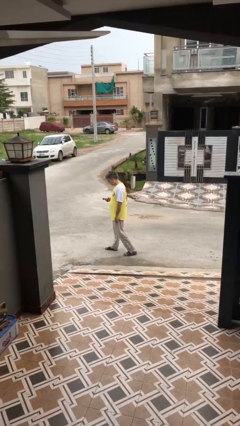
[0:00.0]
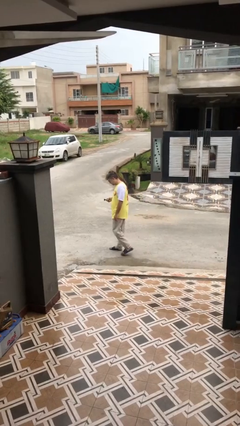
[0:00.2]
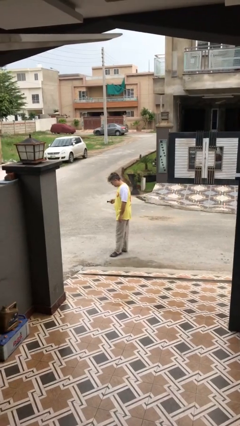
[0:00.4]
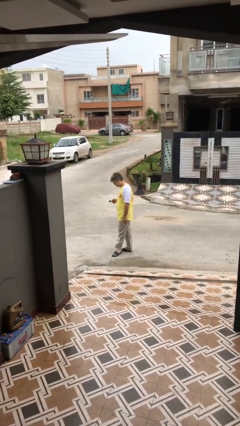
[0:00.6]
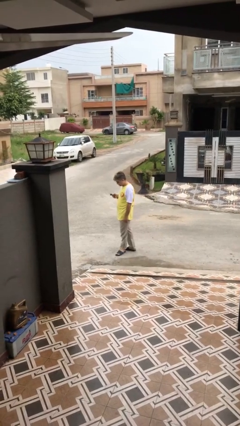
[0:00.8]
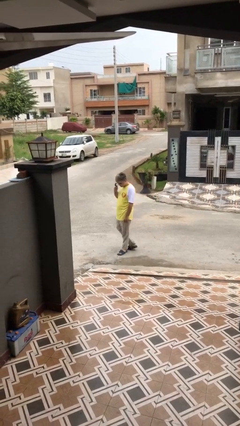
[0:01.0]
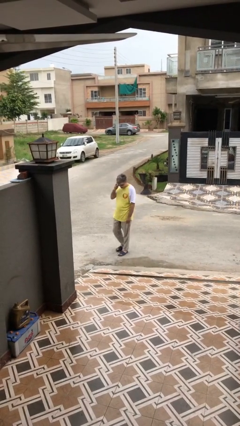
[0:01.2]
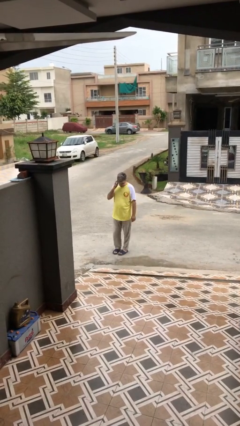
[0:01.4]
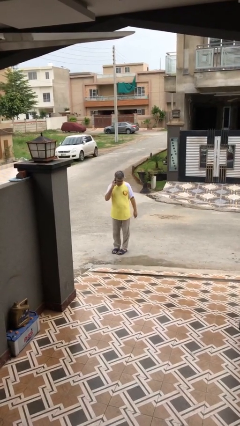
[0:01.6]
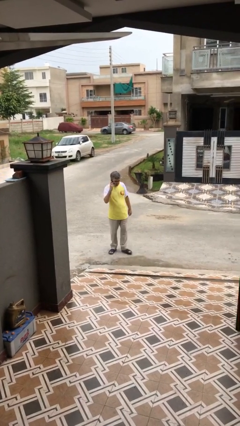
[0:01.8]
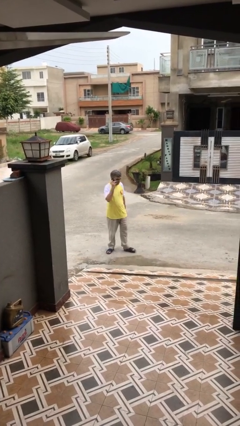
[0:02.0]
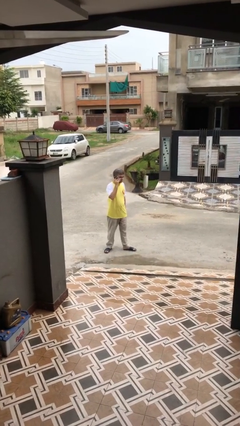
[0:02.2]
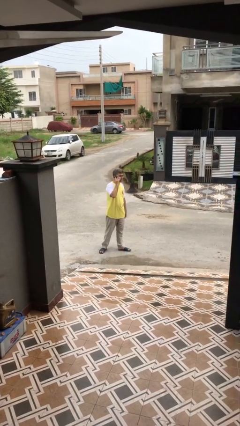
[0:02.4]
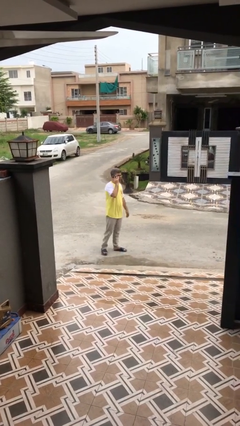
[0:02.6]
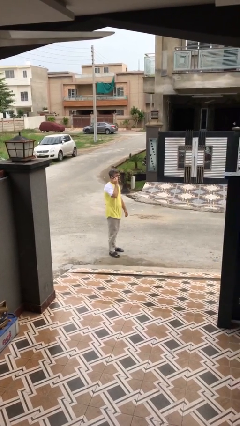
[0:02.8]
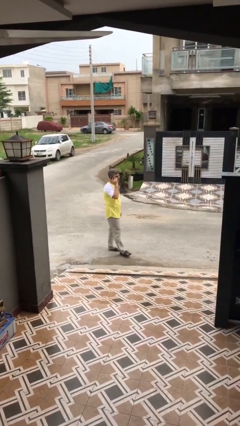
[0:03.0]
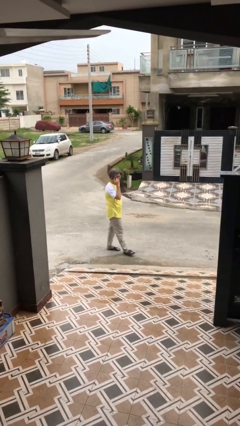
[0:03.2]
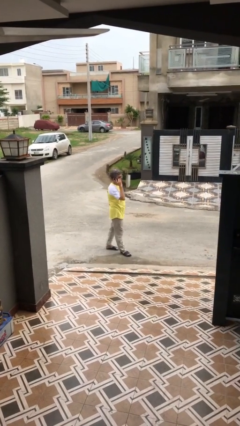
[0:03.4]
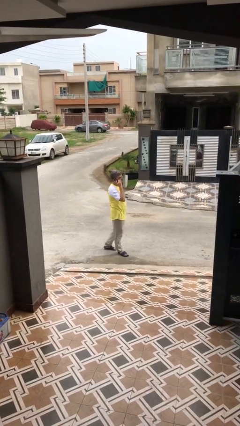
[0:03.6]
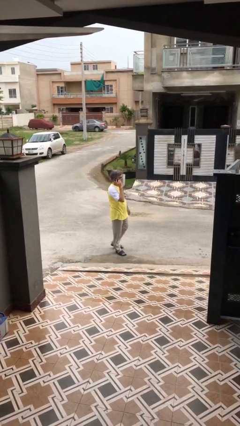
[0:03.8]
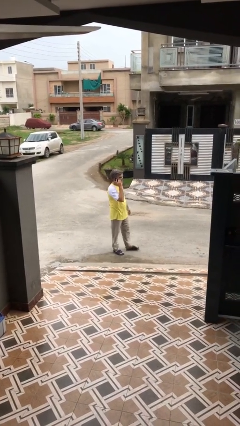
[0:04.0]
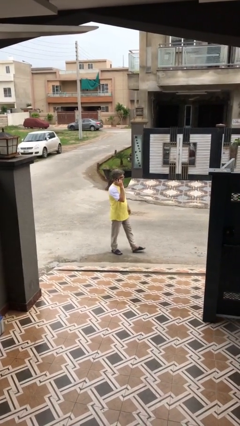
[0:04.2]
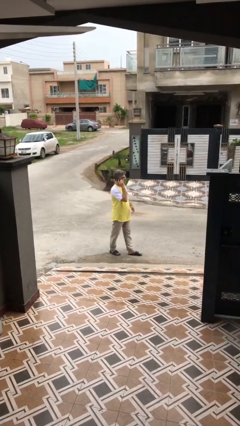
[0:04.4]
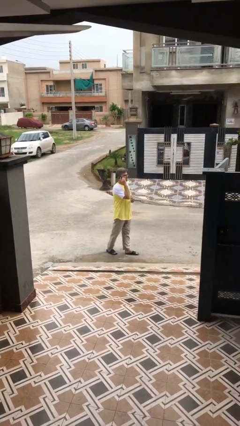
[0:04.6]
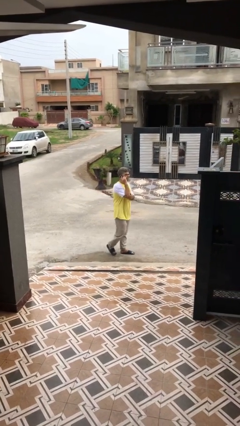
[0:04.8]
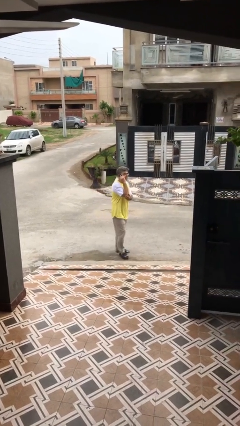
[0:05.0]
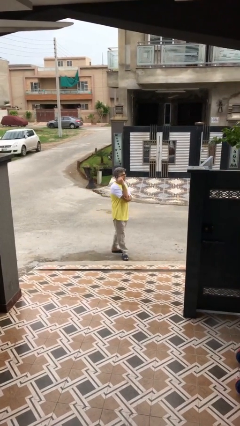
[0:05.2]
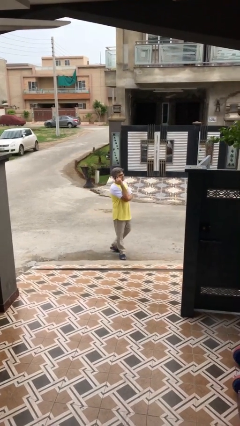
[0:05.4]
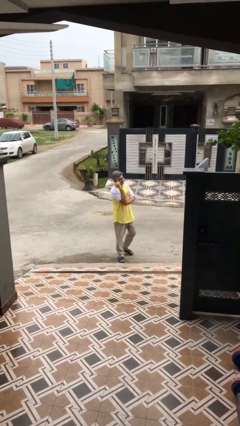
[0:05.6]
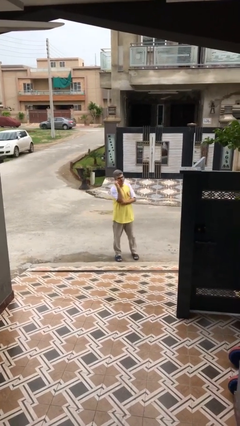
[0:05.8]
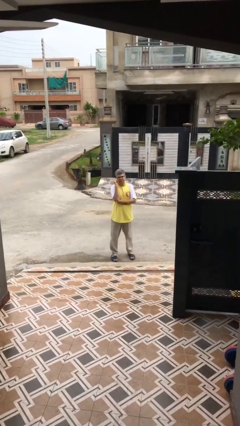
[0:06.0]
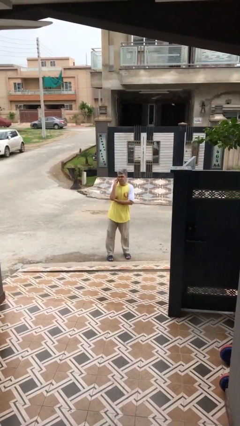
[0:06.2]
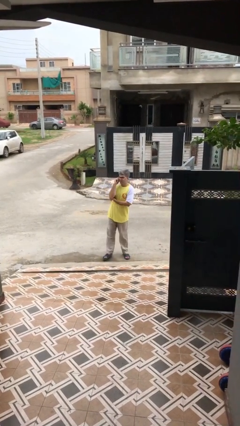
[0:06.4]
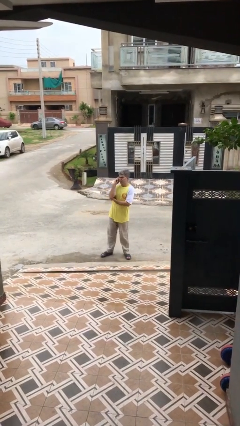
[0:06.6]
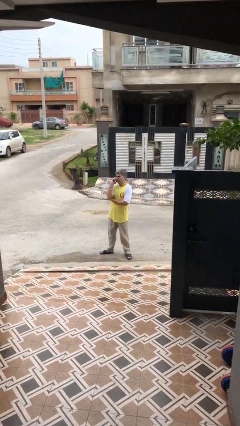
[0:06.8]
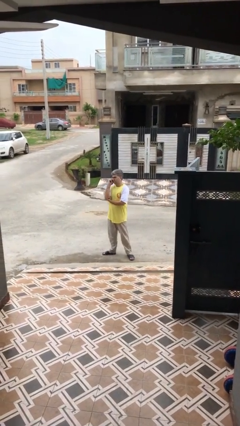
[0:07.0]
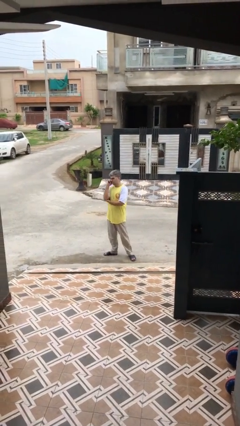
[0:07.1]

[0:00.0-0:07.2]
person talks on phone

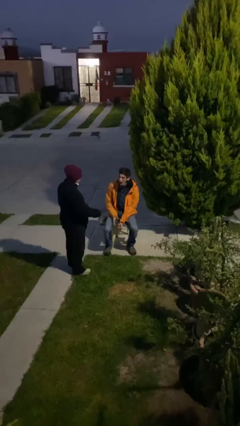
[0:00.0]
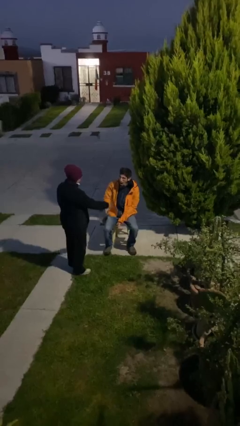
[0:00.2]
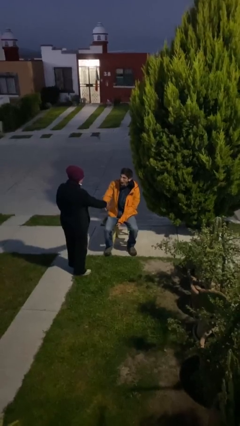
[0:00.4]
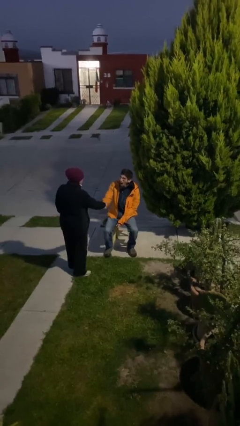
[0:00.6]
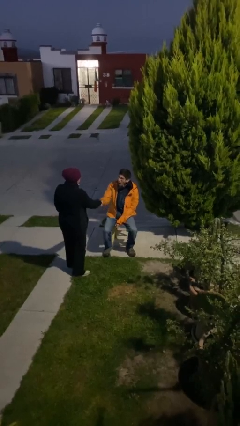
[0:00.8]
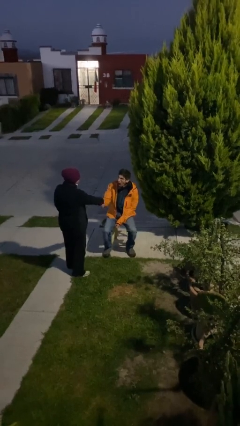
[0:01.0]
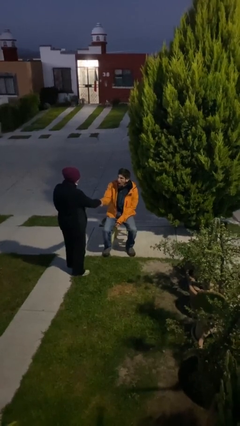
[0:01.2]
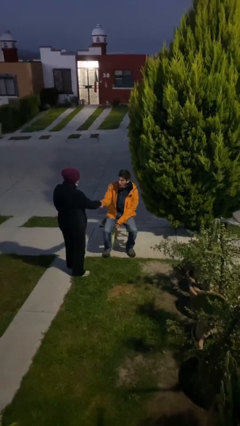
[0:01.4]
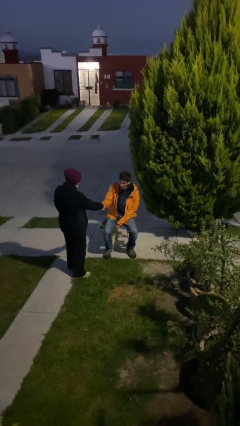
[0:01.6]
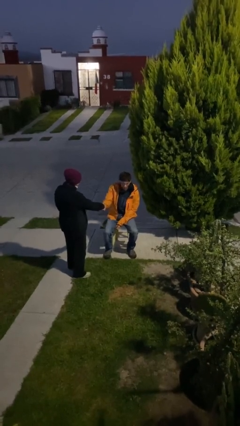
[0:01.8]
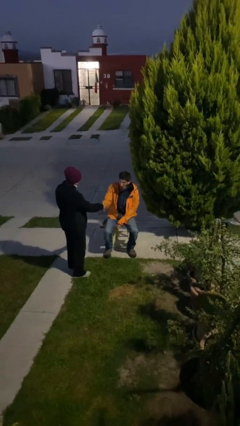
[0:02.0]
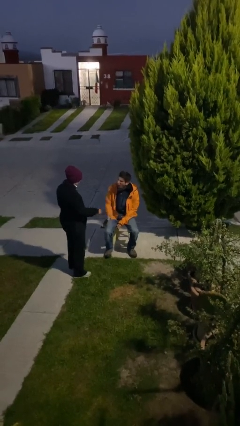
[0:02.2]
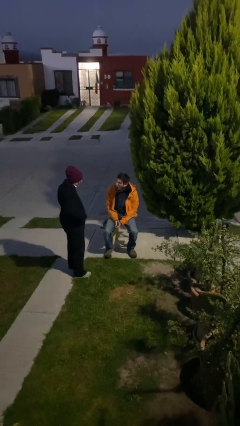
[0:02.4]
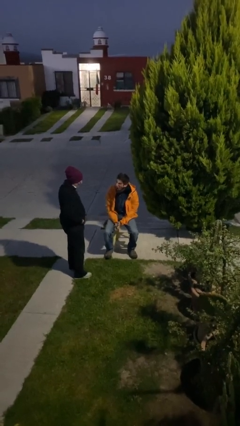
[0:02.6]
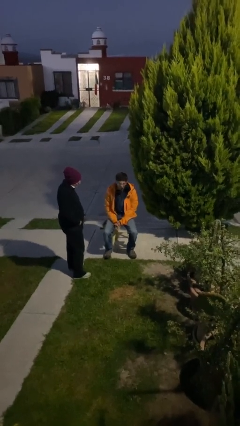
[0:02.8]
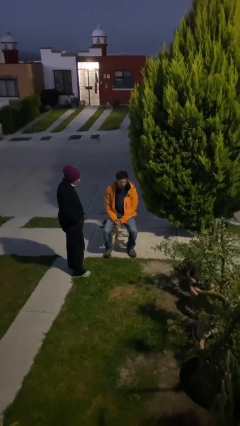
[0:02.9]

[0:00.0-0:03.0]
person shakes hand

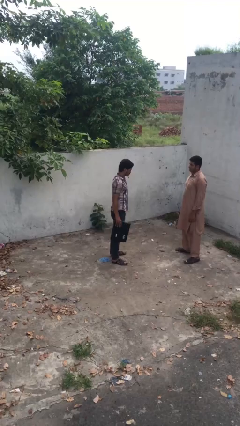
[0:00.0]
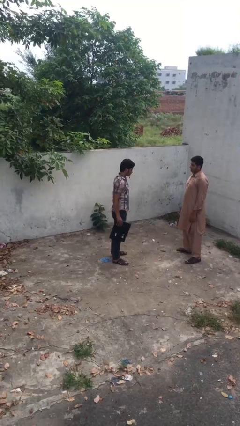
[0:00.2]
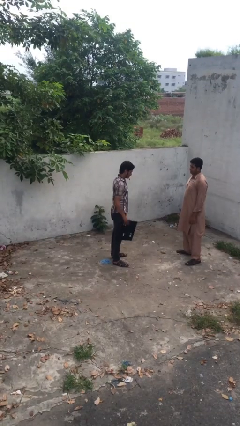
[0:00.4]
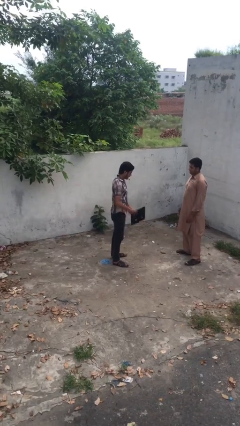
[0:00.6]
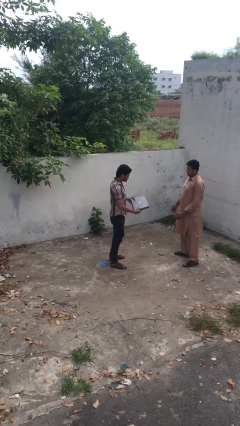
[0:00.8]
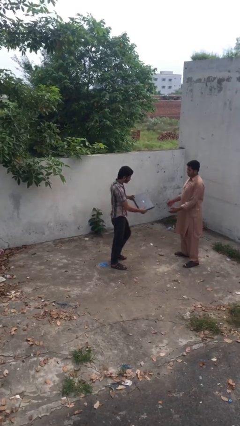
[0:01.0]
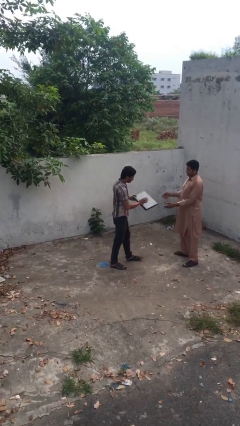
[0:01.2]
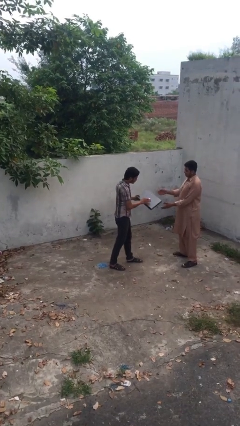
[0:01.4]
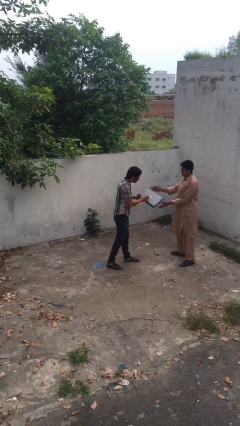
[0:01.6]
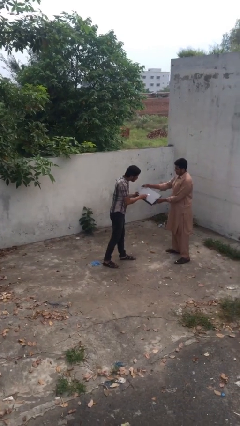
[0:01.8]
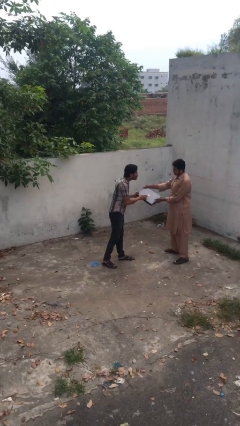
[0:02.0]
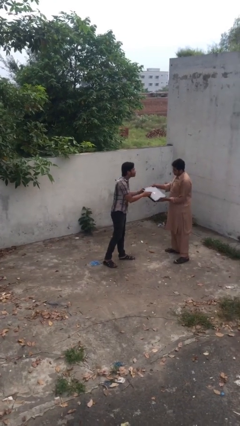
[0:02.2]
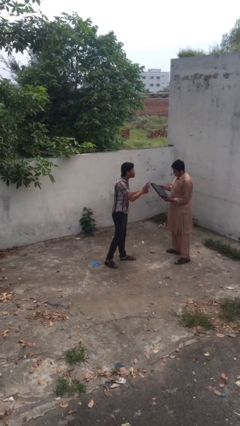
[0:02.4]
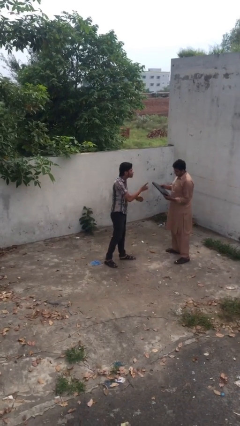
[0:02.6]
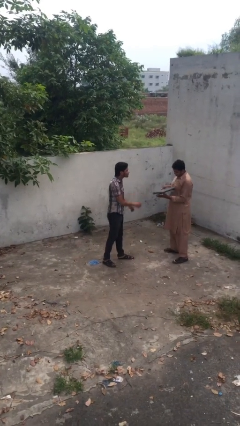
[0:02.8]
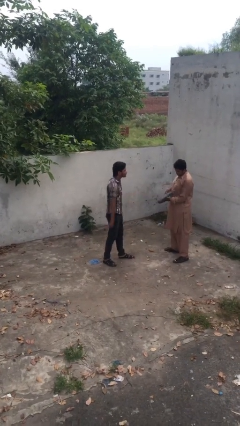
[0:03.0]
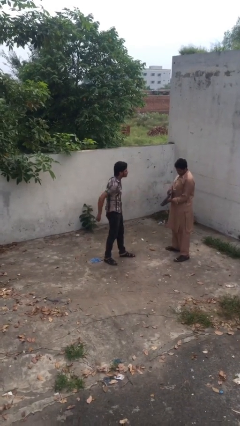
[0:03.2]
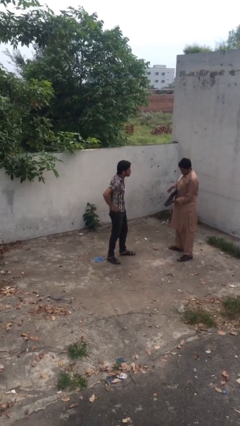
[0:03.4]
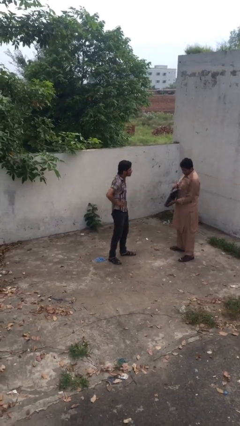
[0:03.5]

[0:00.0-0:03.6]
person transfers object to person

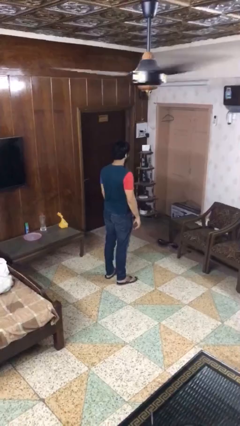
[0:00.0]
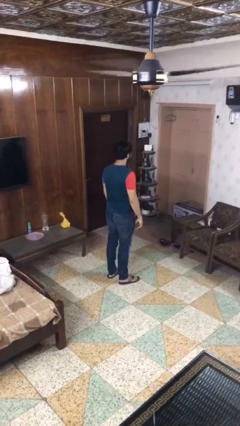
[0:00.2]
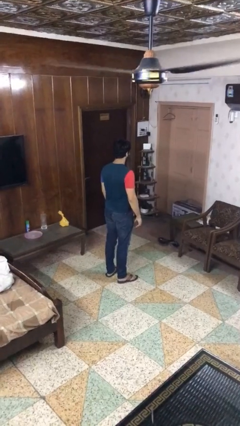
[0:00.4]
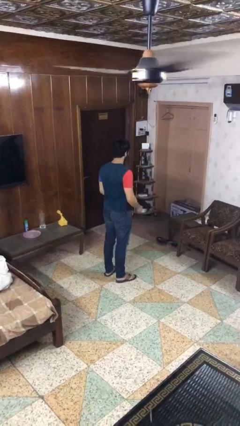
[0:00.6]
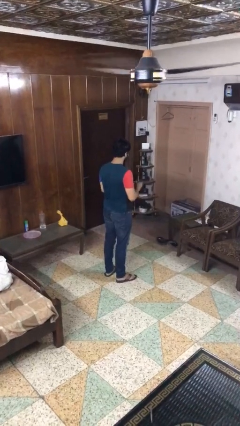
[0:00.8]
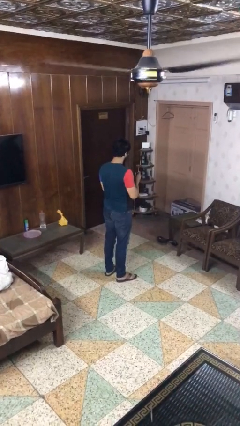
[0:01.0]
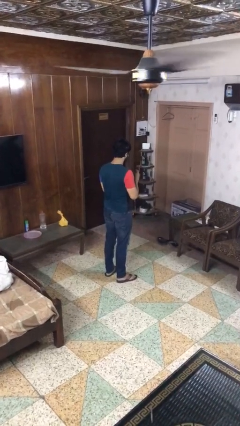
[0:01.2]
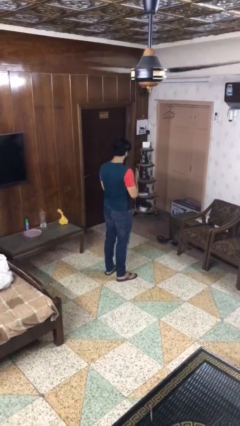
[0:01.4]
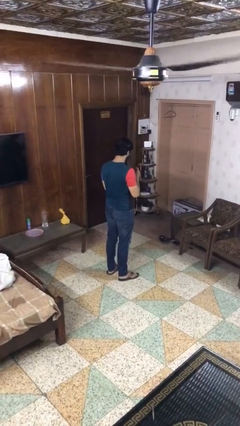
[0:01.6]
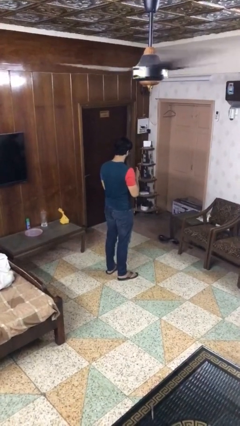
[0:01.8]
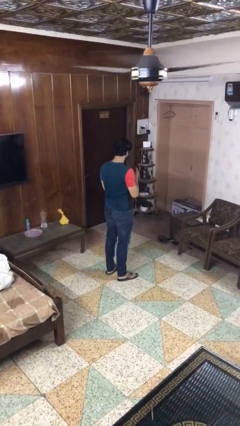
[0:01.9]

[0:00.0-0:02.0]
person clips fingernails

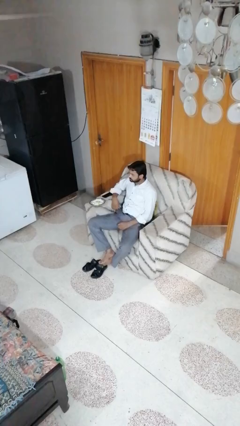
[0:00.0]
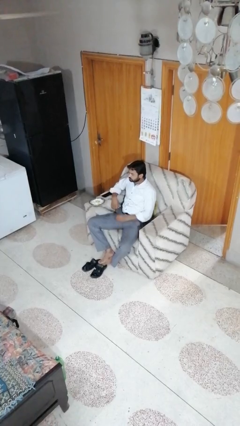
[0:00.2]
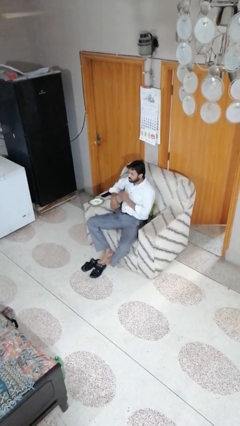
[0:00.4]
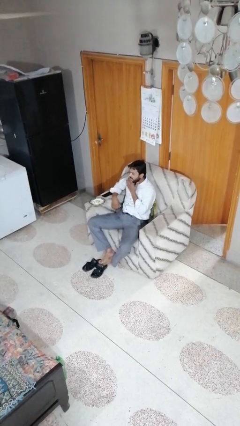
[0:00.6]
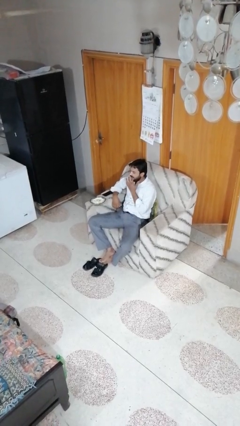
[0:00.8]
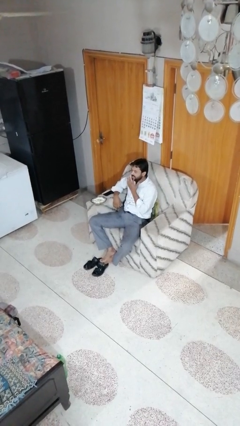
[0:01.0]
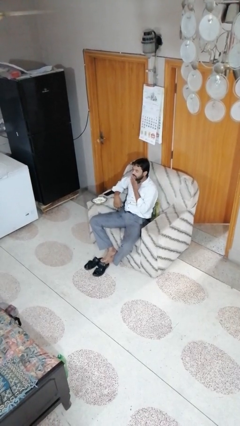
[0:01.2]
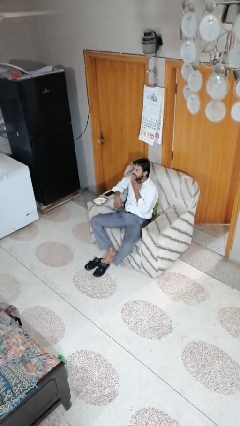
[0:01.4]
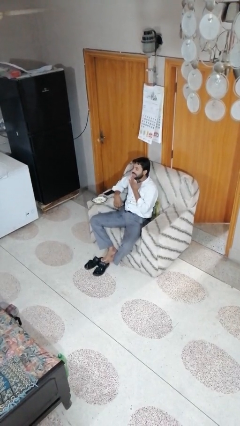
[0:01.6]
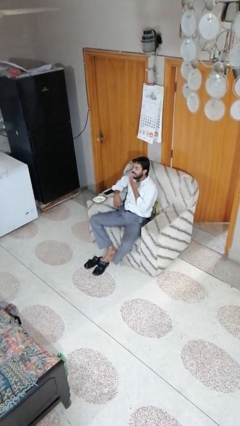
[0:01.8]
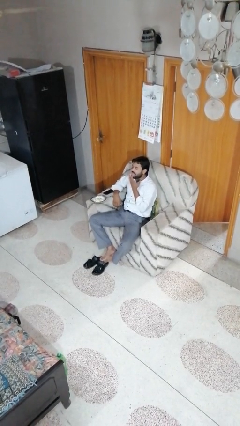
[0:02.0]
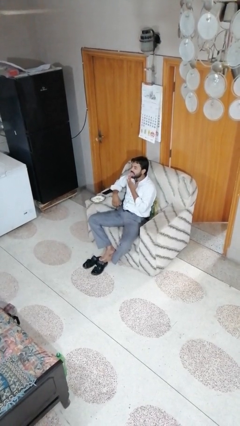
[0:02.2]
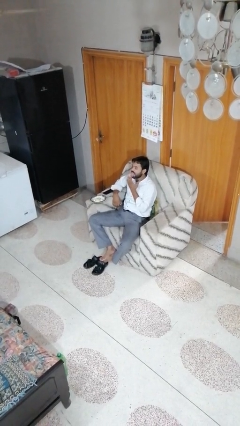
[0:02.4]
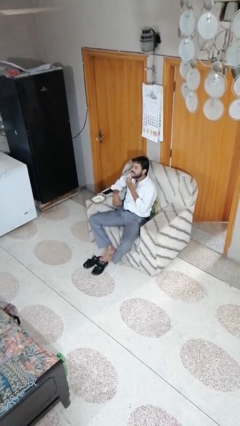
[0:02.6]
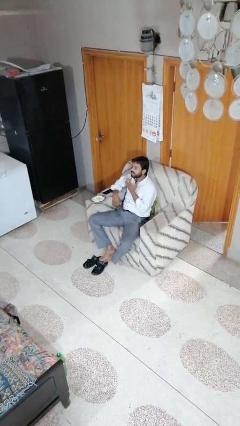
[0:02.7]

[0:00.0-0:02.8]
person licks fingers
